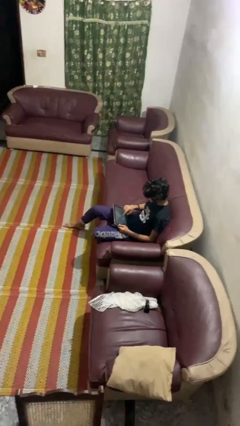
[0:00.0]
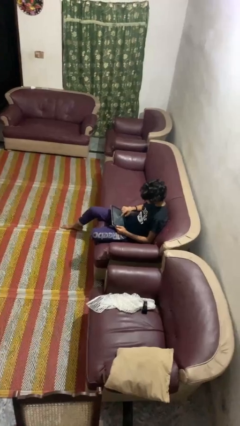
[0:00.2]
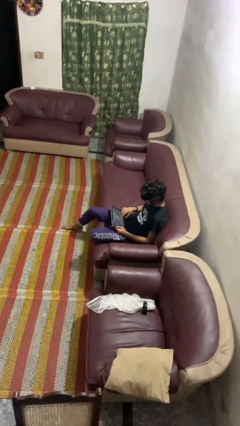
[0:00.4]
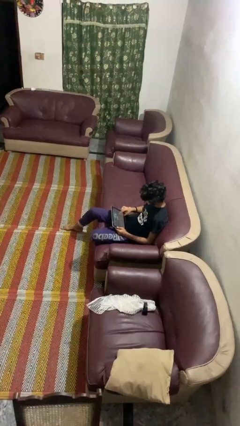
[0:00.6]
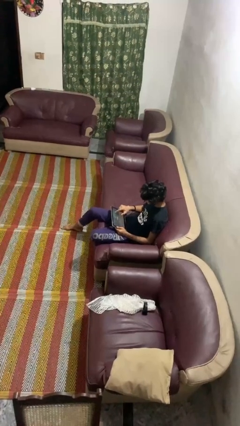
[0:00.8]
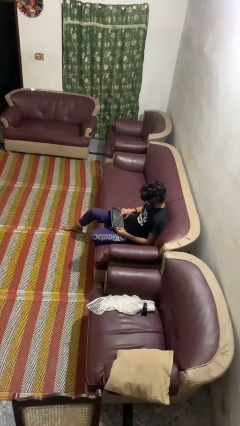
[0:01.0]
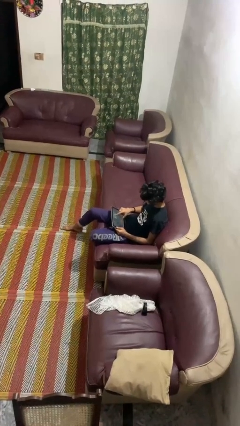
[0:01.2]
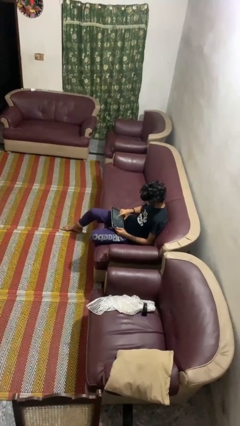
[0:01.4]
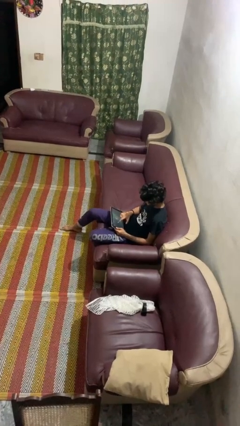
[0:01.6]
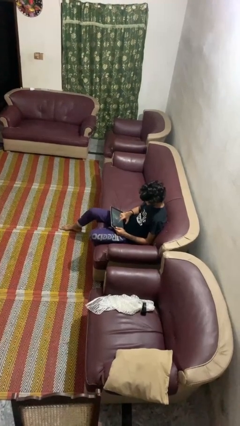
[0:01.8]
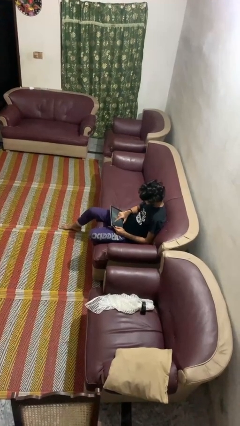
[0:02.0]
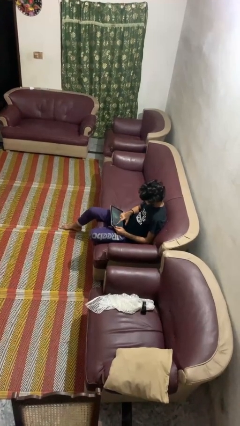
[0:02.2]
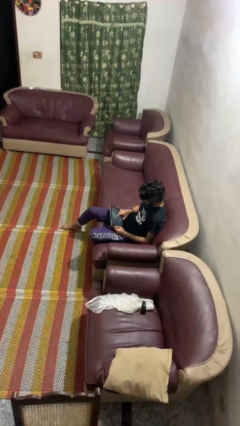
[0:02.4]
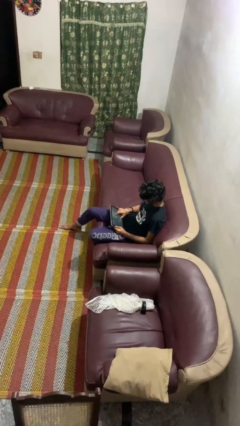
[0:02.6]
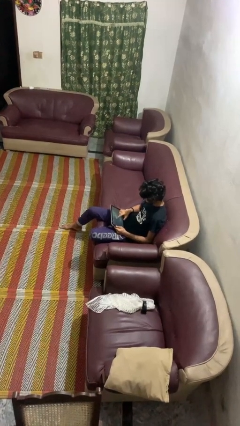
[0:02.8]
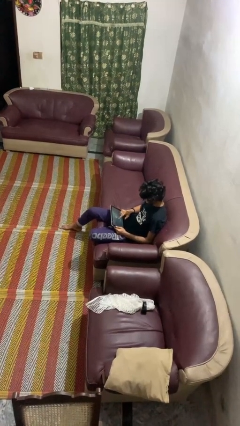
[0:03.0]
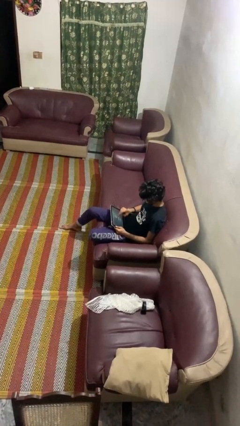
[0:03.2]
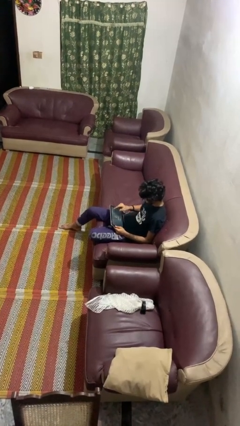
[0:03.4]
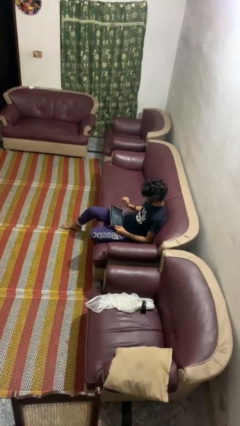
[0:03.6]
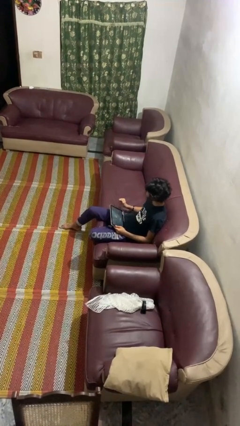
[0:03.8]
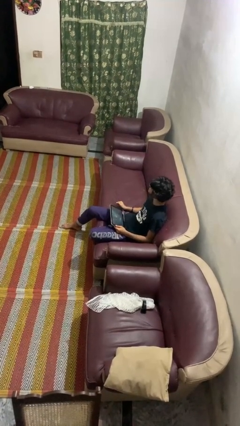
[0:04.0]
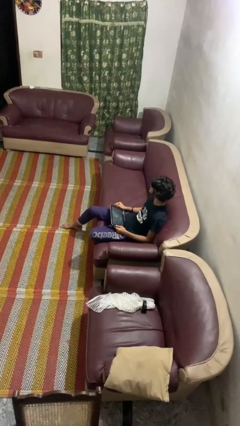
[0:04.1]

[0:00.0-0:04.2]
person interacts with tablet

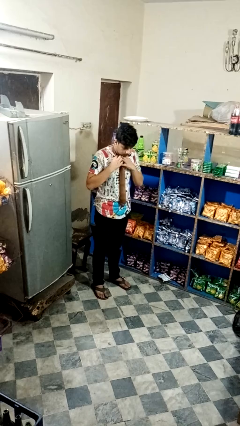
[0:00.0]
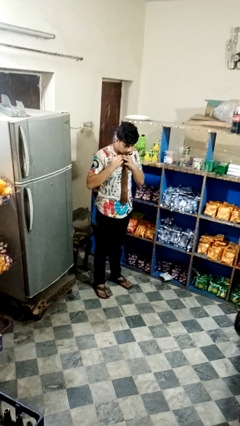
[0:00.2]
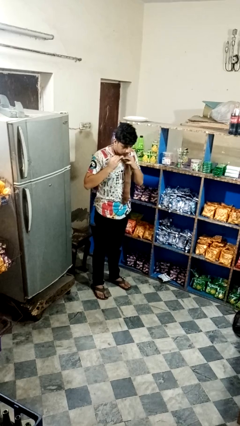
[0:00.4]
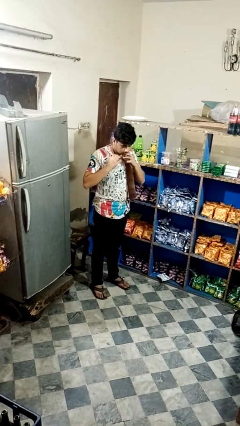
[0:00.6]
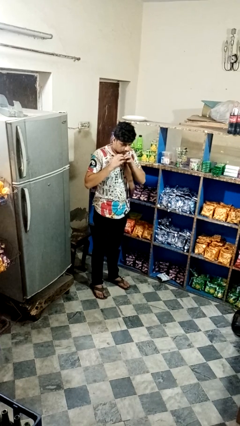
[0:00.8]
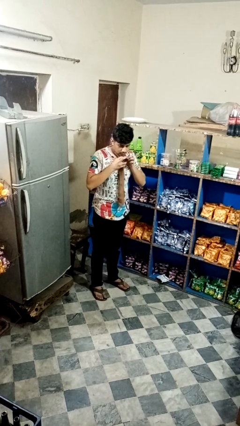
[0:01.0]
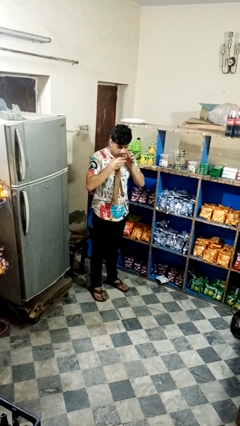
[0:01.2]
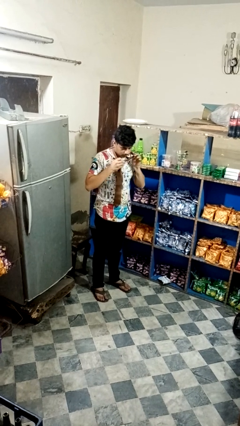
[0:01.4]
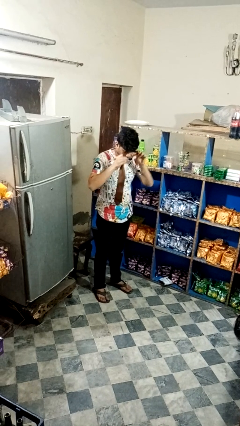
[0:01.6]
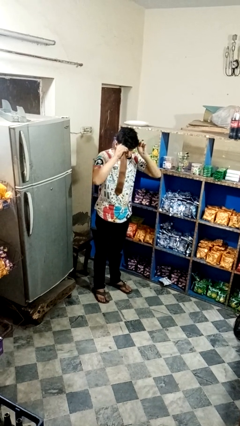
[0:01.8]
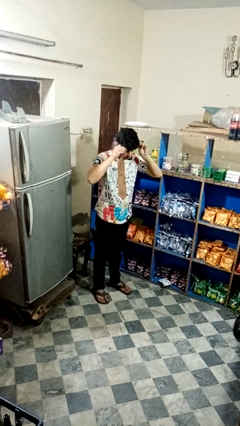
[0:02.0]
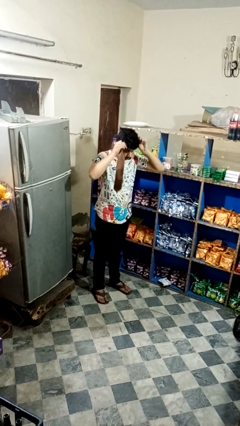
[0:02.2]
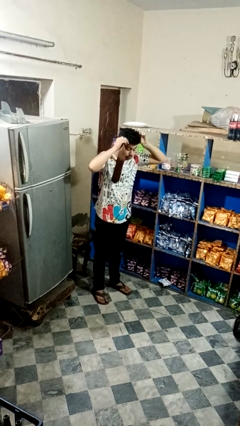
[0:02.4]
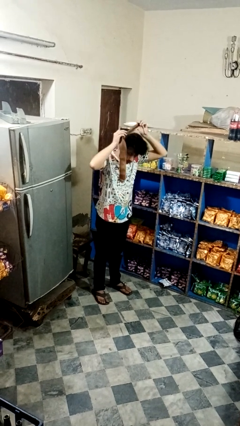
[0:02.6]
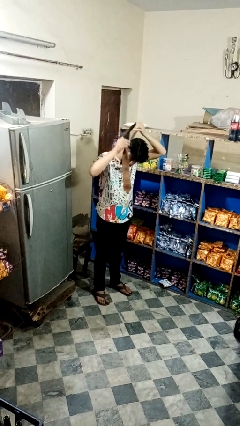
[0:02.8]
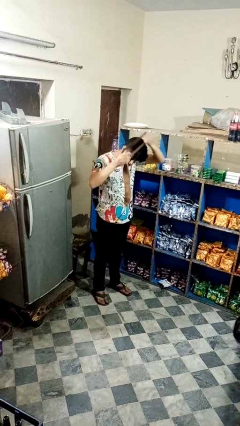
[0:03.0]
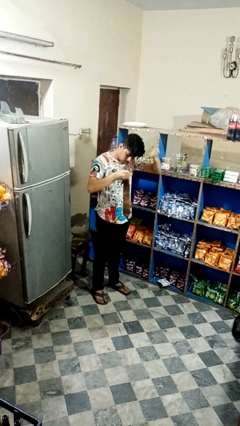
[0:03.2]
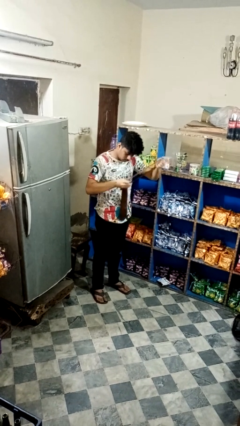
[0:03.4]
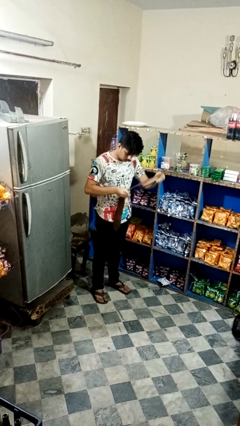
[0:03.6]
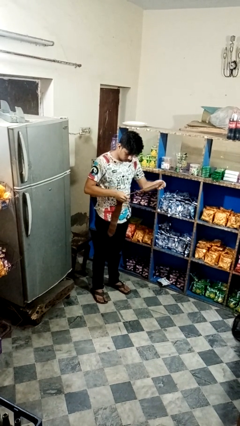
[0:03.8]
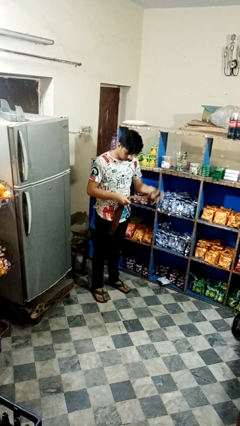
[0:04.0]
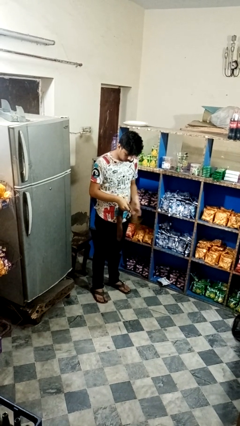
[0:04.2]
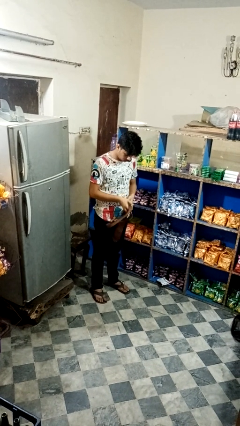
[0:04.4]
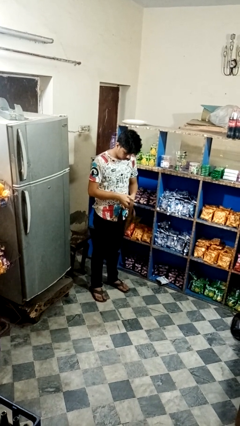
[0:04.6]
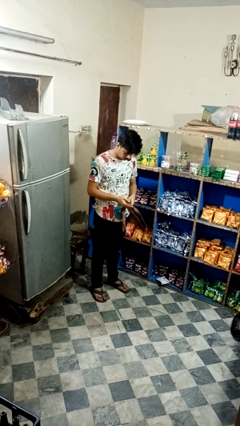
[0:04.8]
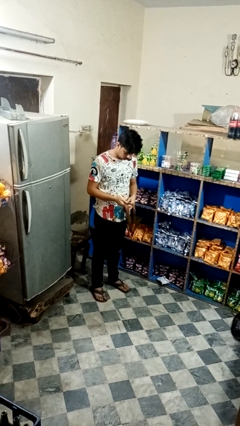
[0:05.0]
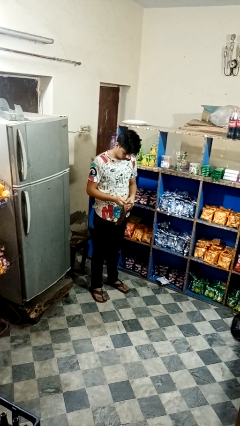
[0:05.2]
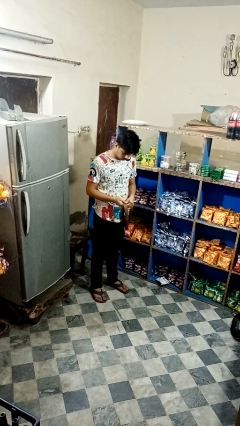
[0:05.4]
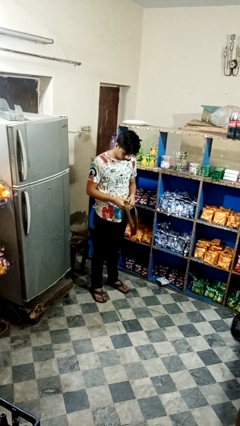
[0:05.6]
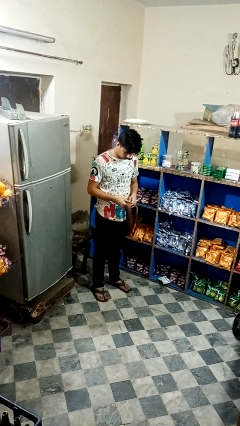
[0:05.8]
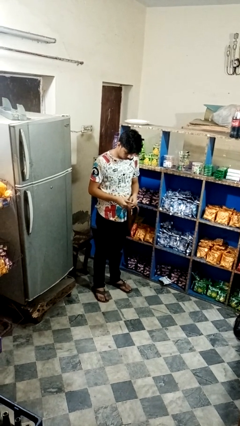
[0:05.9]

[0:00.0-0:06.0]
person takes off necktie

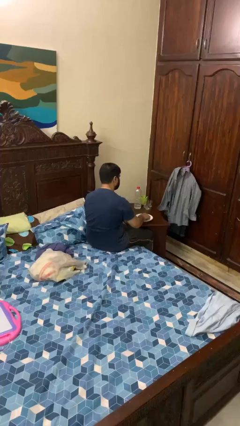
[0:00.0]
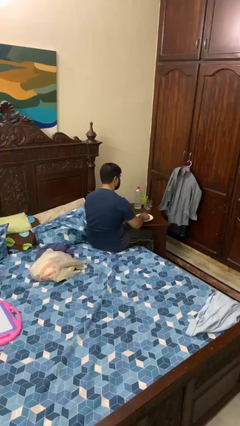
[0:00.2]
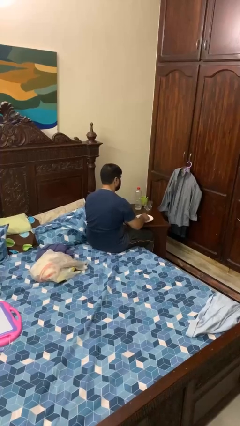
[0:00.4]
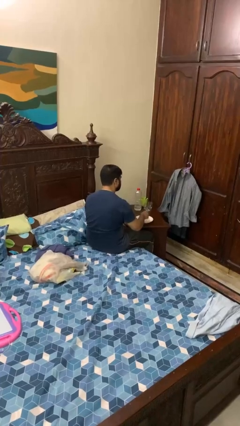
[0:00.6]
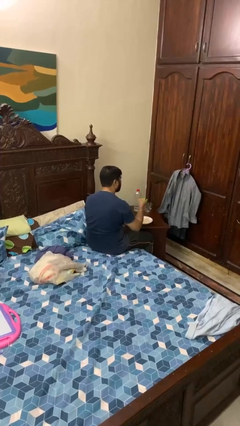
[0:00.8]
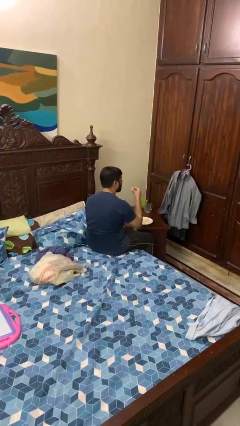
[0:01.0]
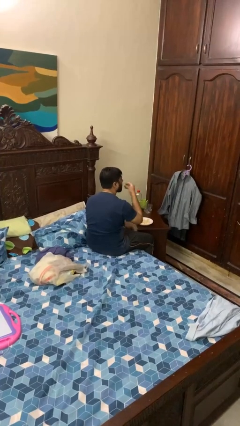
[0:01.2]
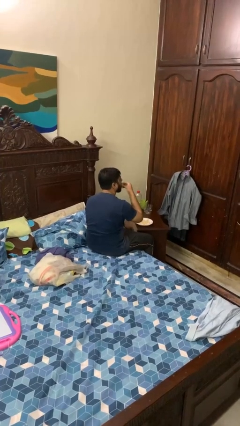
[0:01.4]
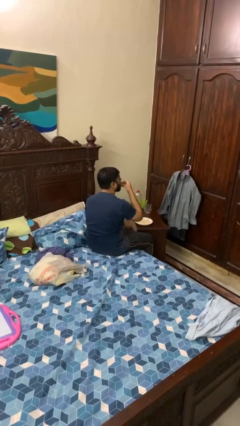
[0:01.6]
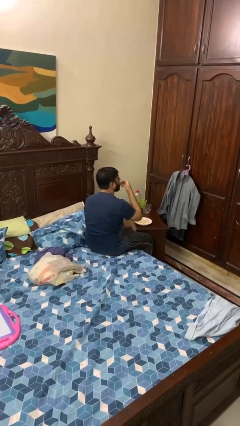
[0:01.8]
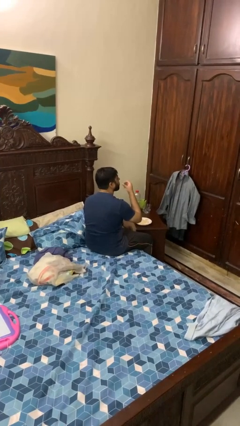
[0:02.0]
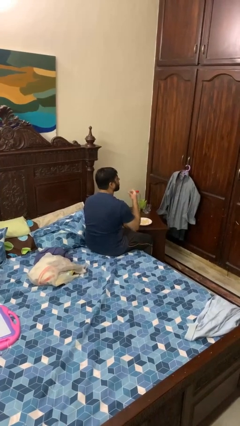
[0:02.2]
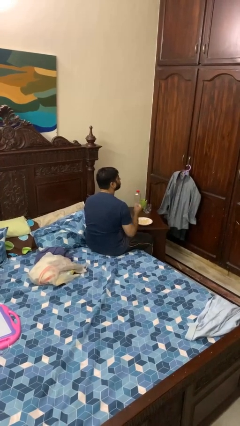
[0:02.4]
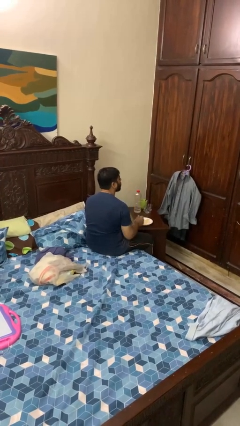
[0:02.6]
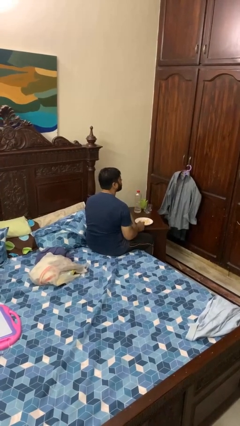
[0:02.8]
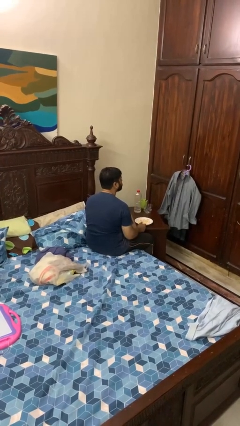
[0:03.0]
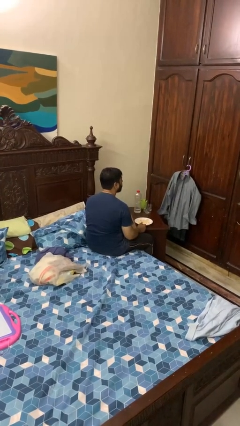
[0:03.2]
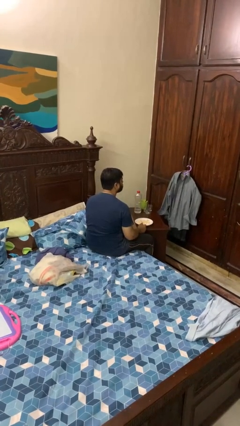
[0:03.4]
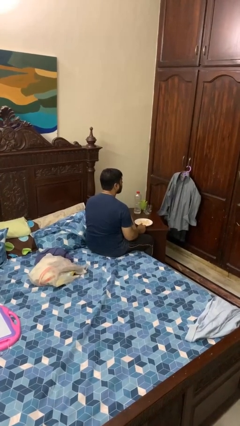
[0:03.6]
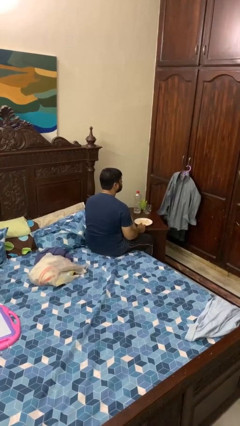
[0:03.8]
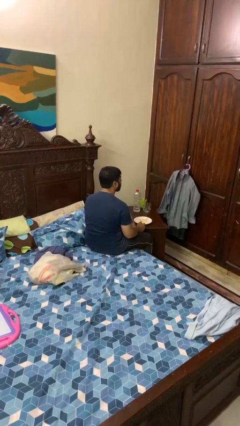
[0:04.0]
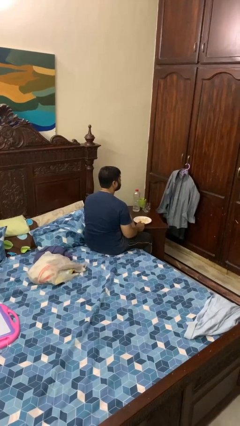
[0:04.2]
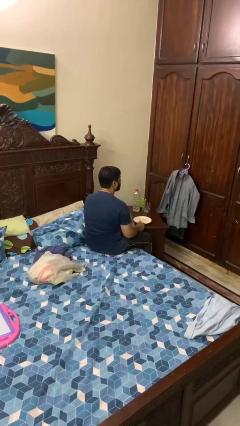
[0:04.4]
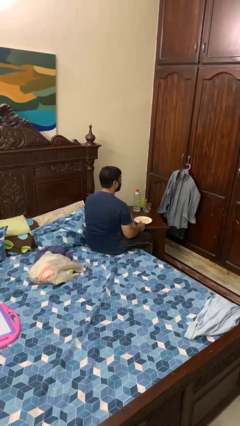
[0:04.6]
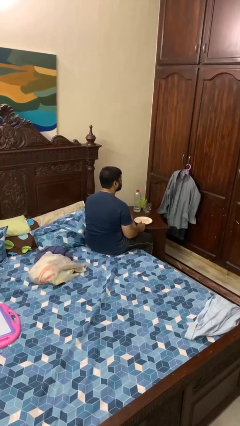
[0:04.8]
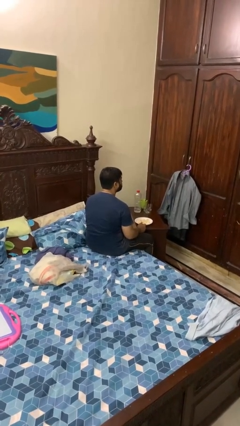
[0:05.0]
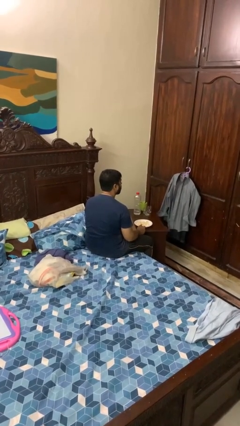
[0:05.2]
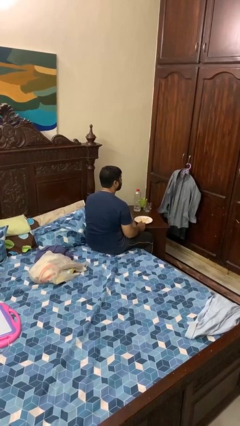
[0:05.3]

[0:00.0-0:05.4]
person eats with hands

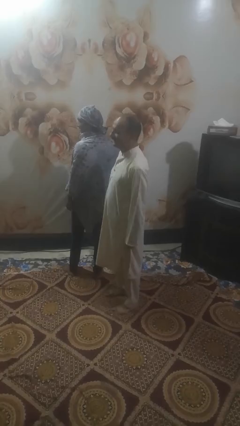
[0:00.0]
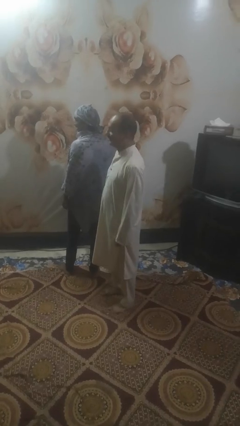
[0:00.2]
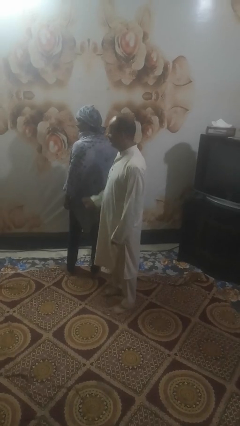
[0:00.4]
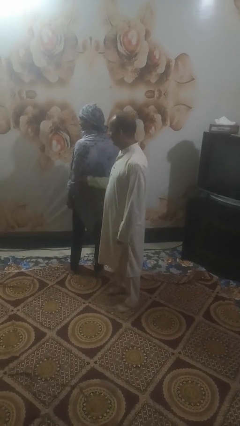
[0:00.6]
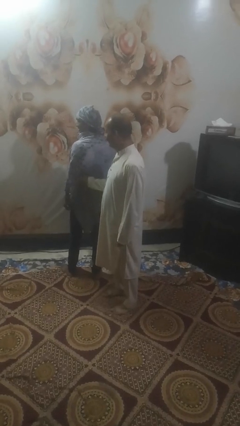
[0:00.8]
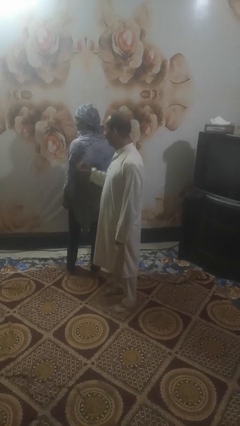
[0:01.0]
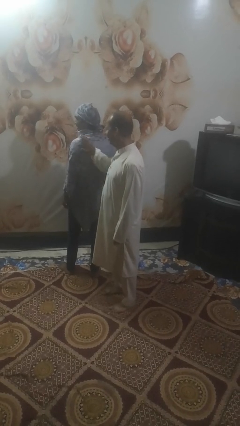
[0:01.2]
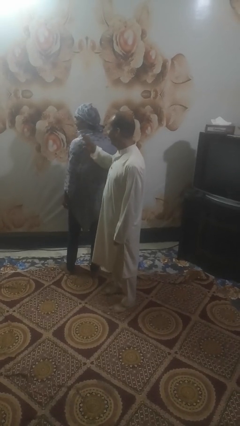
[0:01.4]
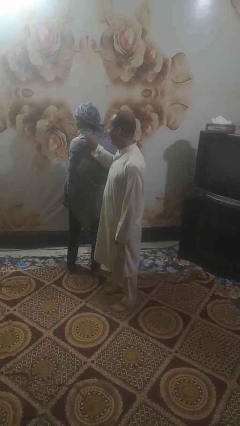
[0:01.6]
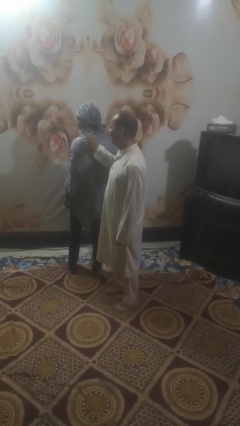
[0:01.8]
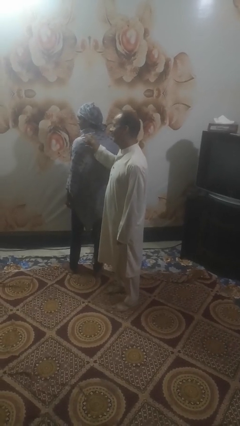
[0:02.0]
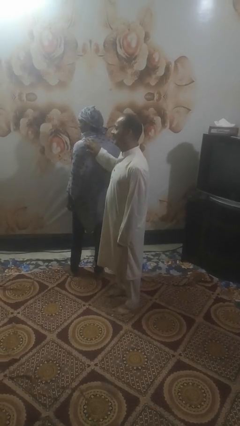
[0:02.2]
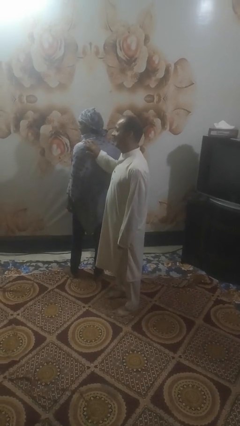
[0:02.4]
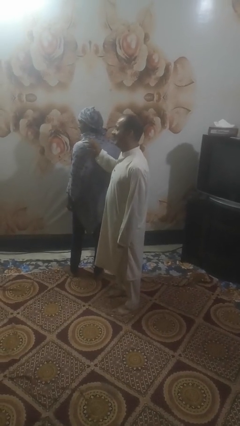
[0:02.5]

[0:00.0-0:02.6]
person touches back of person
